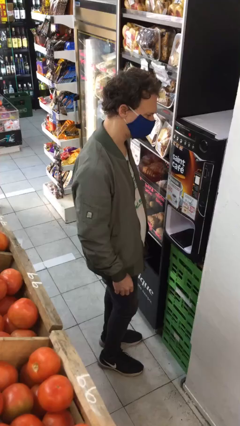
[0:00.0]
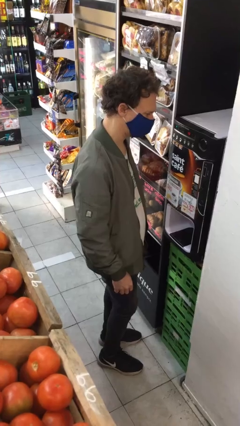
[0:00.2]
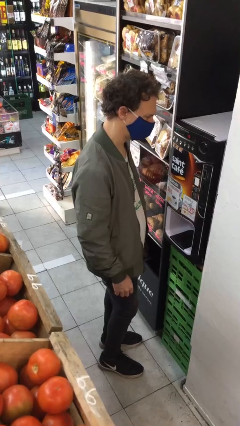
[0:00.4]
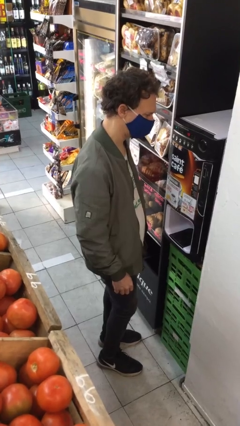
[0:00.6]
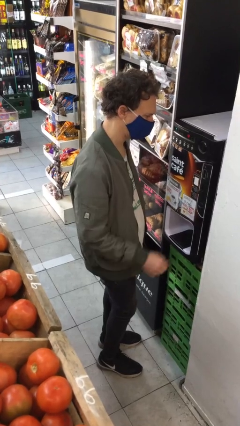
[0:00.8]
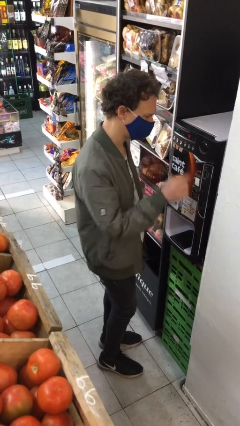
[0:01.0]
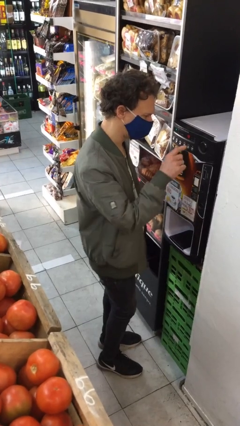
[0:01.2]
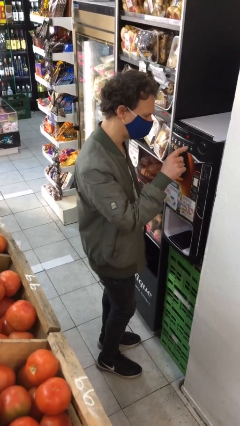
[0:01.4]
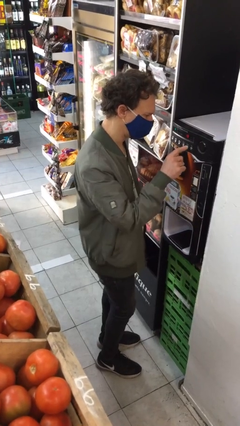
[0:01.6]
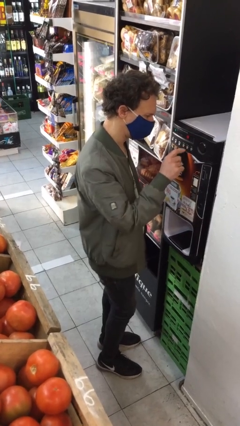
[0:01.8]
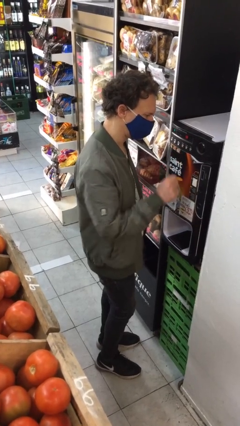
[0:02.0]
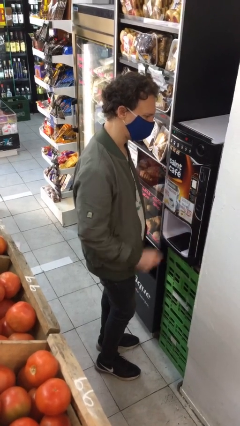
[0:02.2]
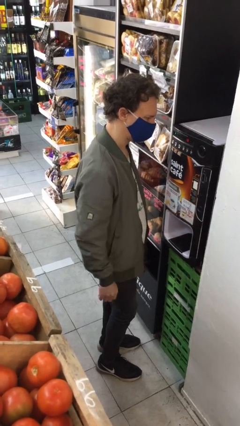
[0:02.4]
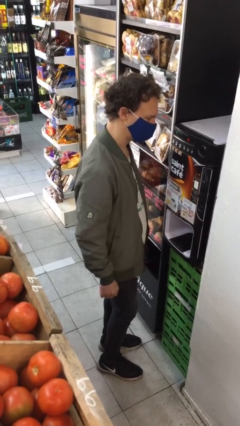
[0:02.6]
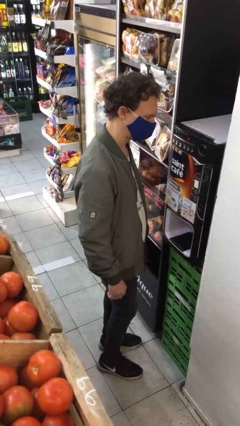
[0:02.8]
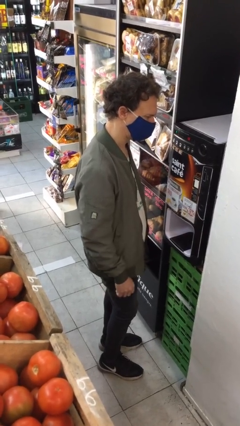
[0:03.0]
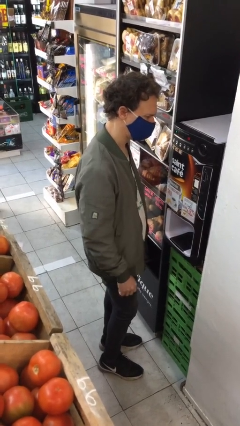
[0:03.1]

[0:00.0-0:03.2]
person purchases from machine

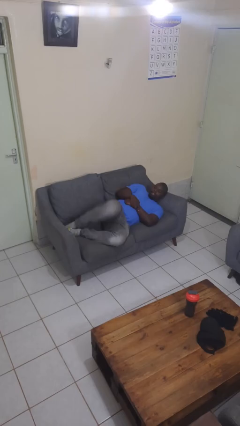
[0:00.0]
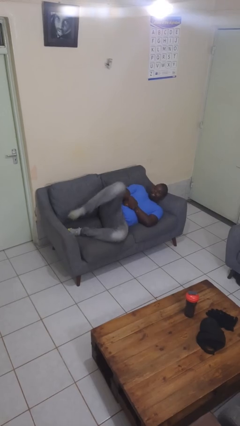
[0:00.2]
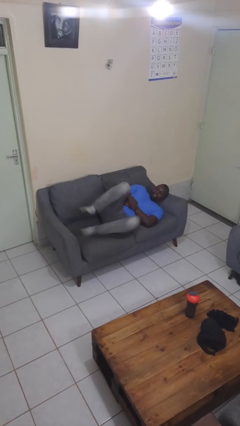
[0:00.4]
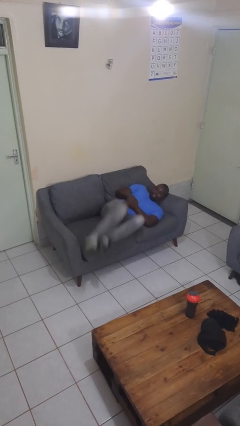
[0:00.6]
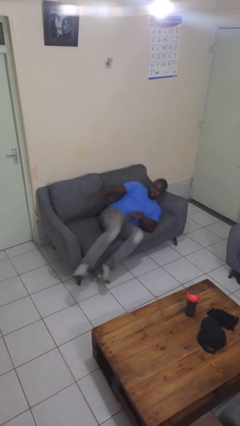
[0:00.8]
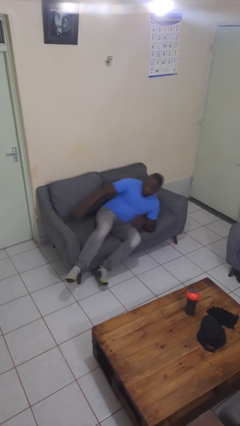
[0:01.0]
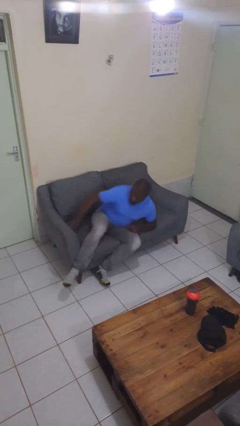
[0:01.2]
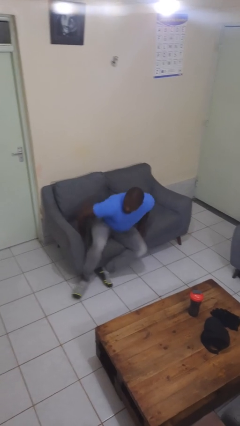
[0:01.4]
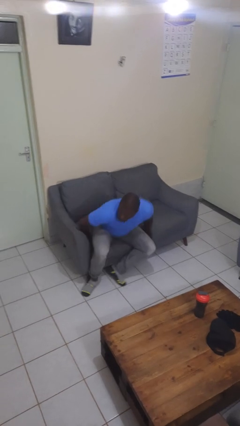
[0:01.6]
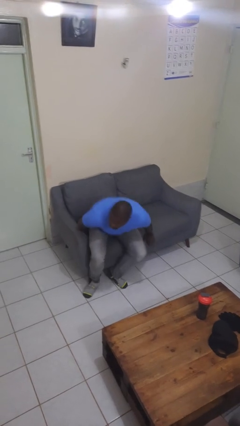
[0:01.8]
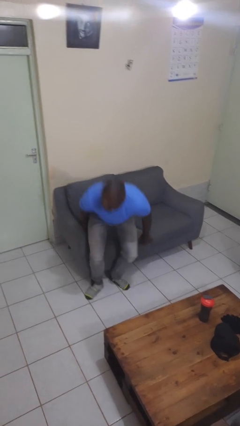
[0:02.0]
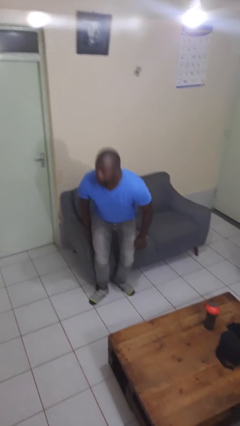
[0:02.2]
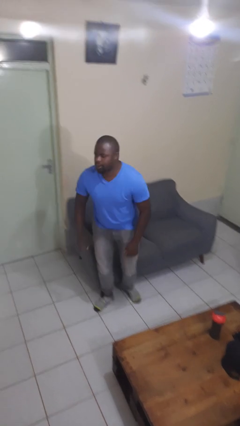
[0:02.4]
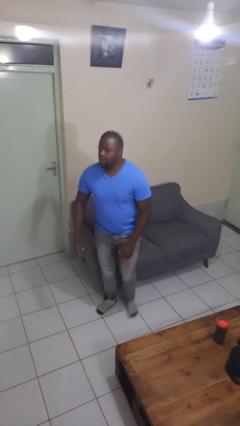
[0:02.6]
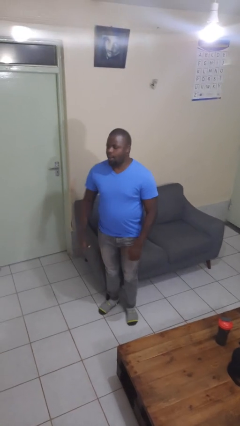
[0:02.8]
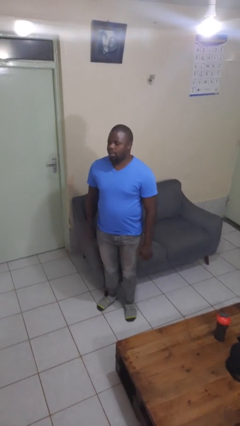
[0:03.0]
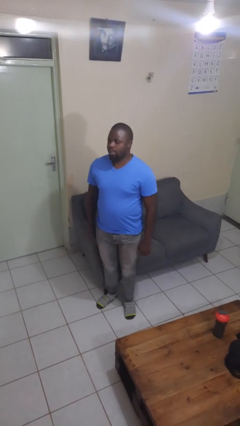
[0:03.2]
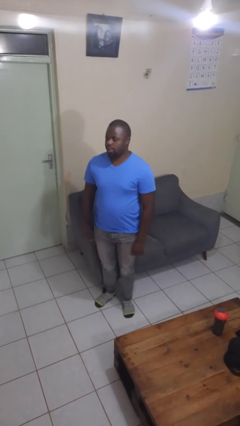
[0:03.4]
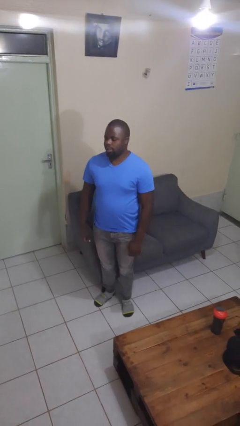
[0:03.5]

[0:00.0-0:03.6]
person stands up

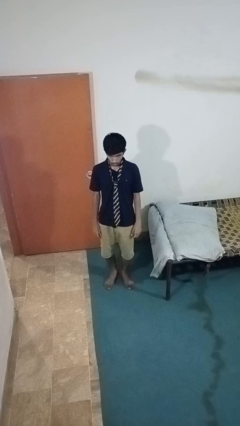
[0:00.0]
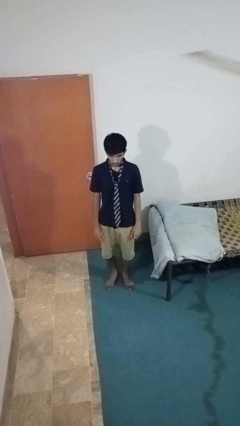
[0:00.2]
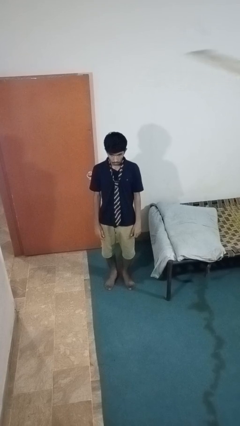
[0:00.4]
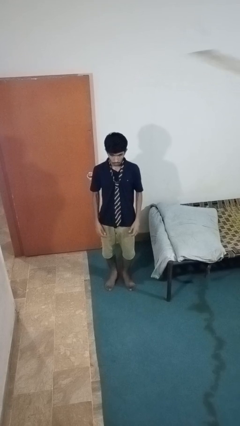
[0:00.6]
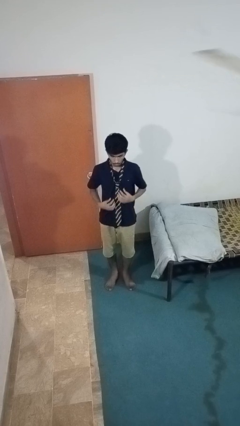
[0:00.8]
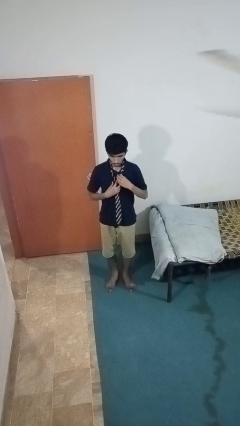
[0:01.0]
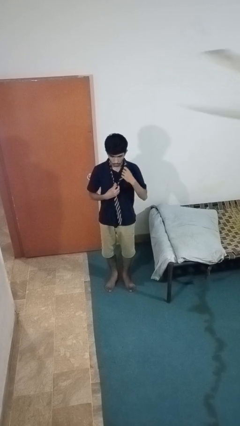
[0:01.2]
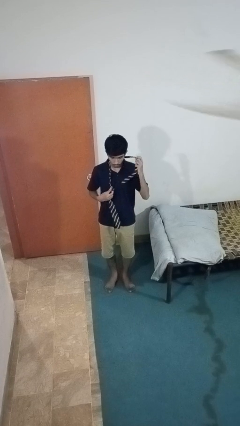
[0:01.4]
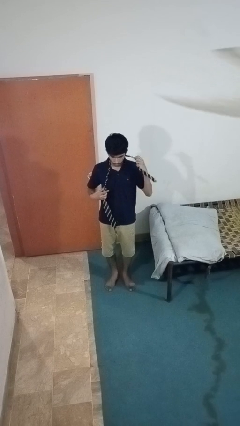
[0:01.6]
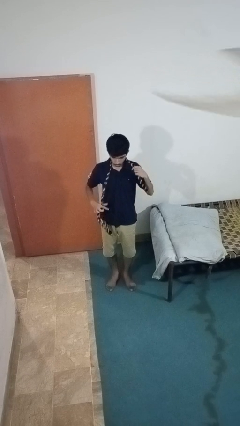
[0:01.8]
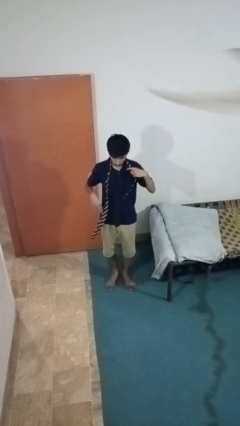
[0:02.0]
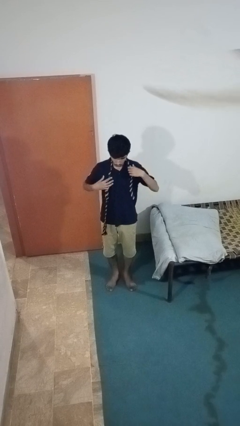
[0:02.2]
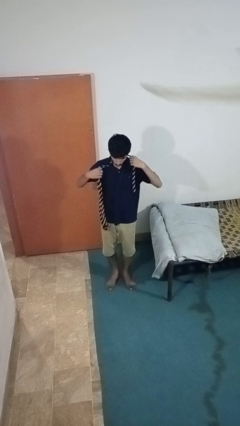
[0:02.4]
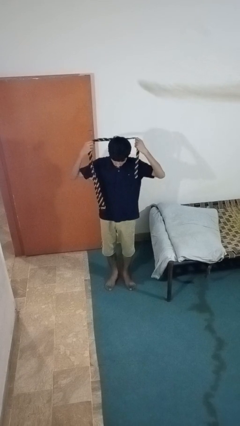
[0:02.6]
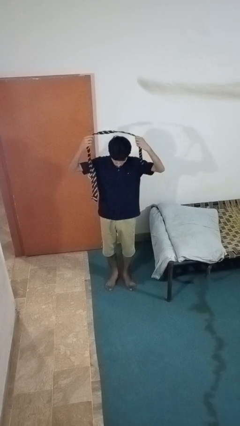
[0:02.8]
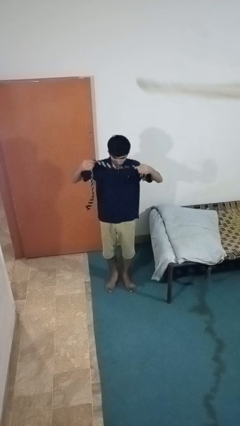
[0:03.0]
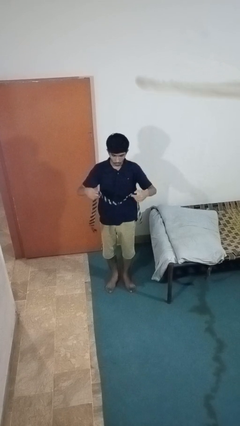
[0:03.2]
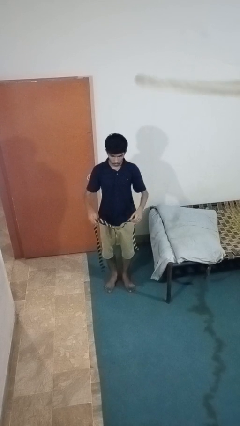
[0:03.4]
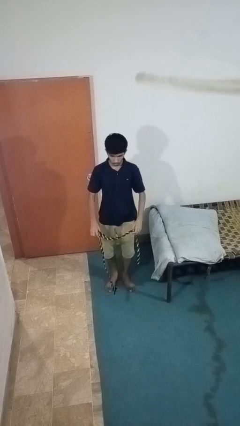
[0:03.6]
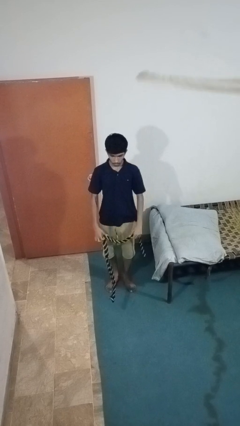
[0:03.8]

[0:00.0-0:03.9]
person takes off necktie

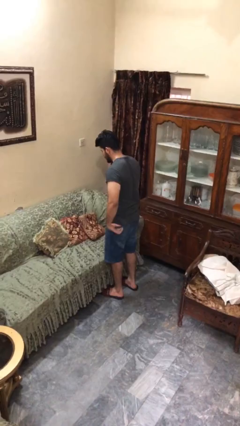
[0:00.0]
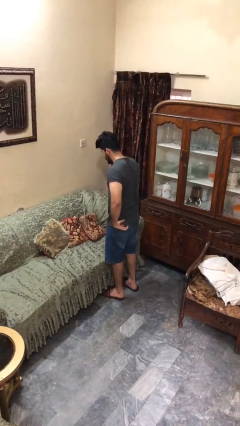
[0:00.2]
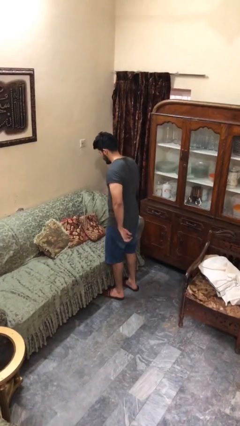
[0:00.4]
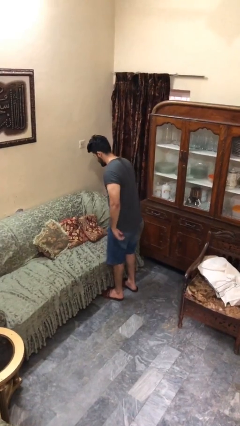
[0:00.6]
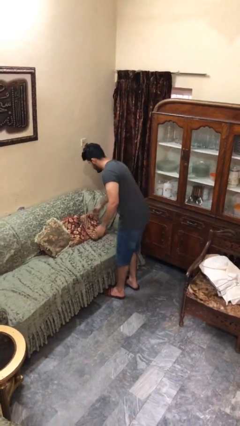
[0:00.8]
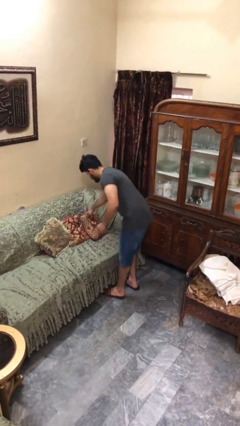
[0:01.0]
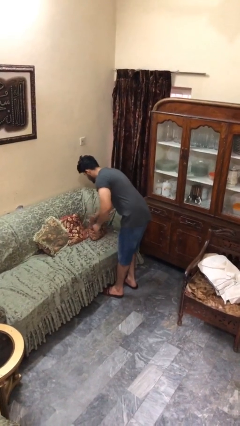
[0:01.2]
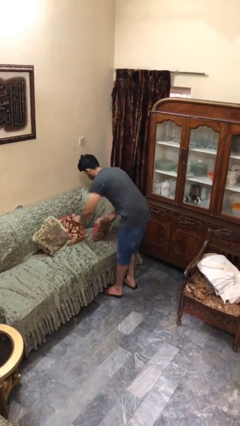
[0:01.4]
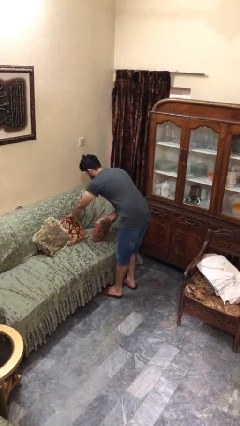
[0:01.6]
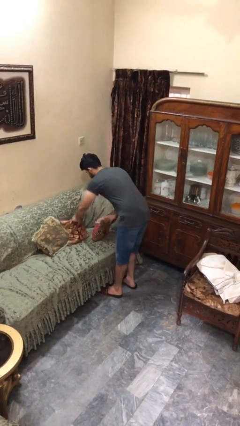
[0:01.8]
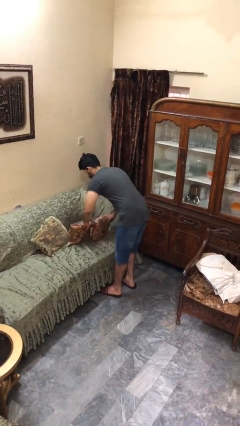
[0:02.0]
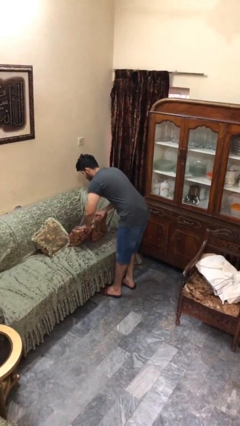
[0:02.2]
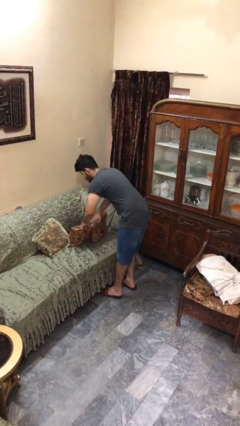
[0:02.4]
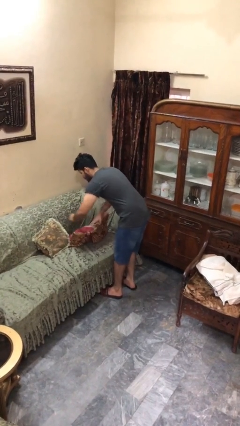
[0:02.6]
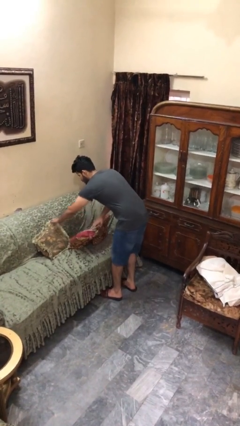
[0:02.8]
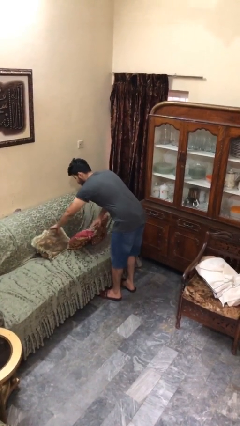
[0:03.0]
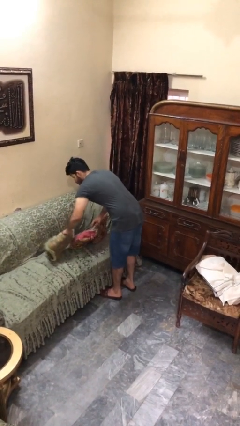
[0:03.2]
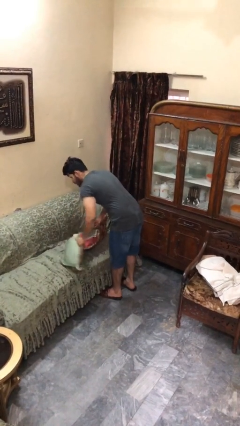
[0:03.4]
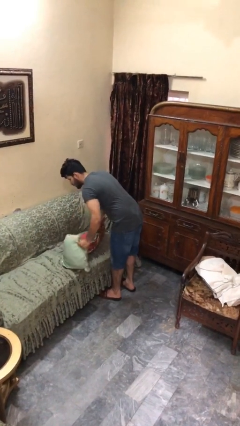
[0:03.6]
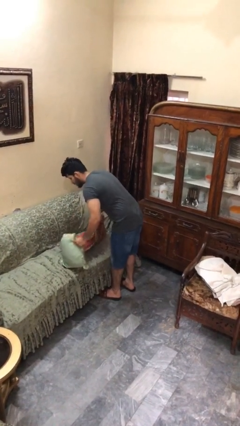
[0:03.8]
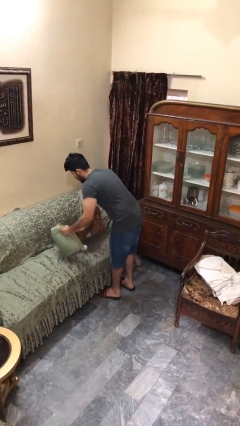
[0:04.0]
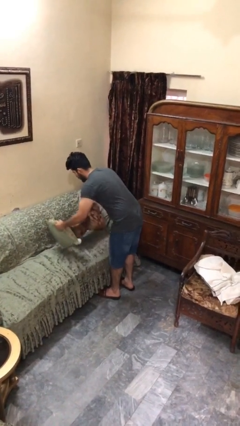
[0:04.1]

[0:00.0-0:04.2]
person searches in couch

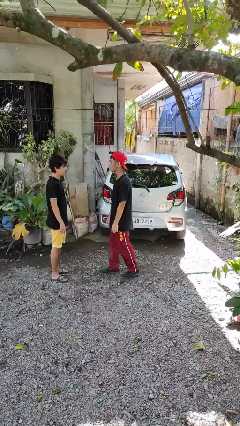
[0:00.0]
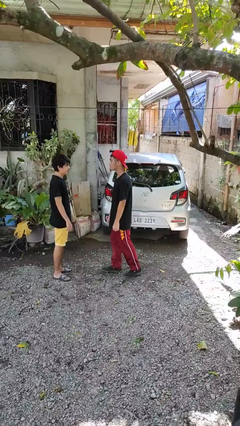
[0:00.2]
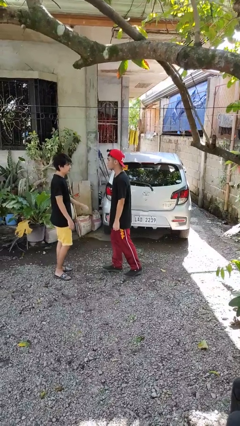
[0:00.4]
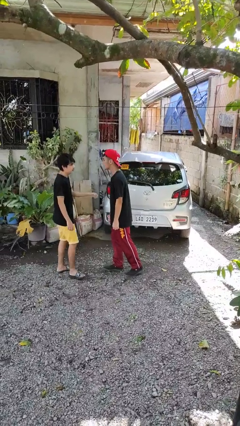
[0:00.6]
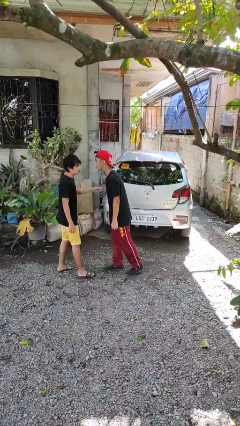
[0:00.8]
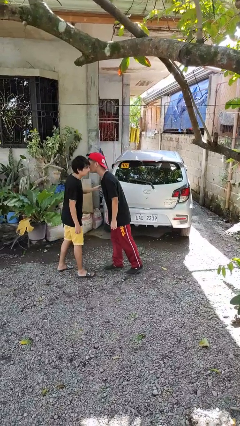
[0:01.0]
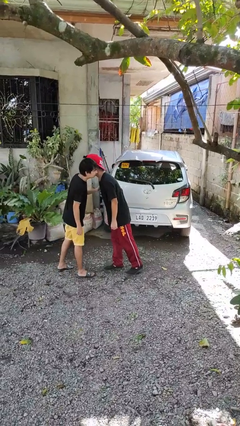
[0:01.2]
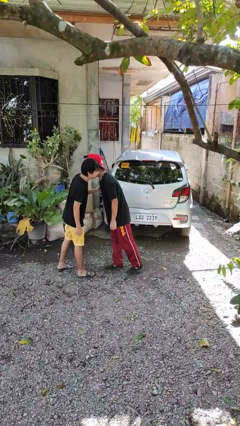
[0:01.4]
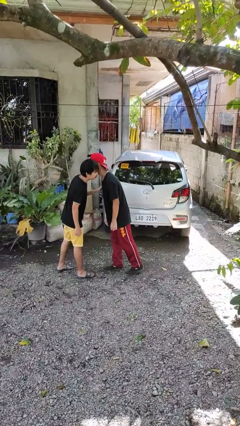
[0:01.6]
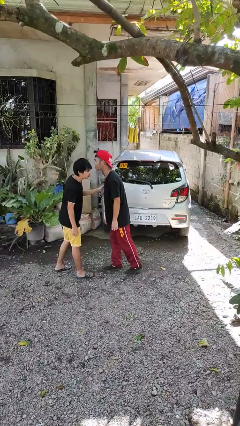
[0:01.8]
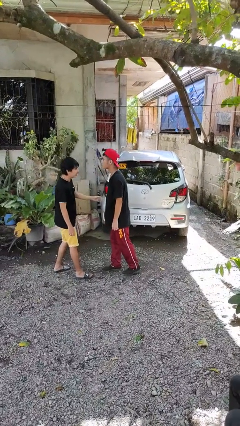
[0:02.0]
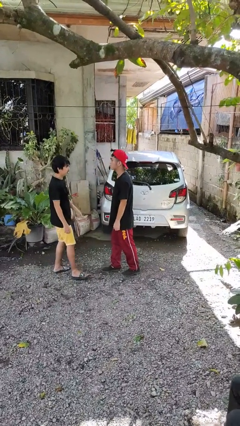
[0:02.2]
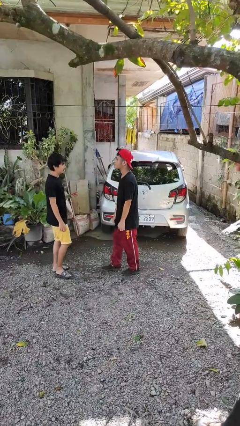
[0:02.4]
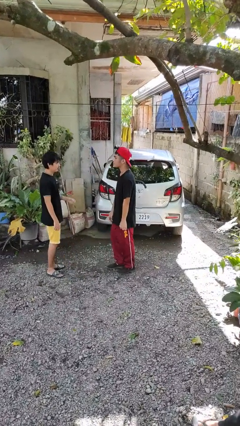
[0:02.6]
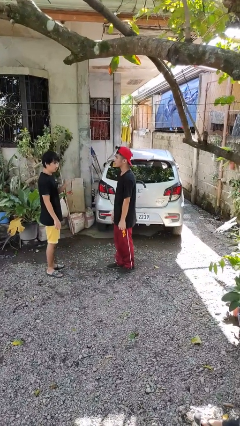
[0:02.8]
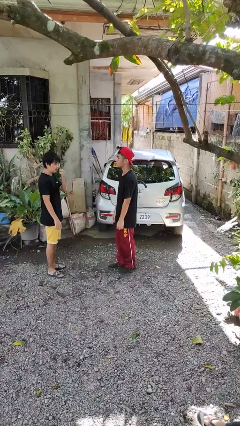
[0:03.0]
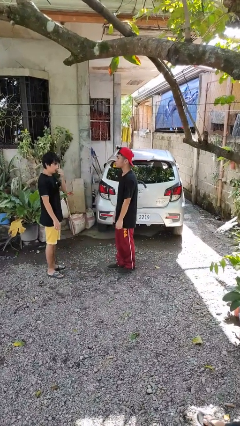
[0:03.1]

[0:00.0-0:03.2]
person kisses cheek of person

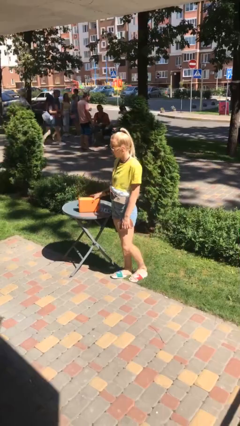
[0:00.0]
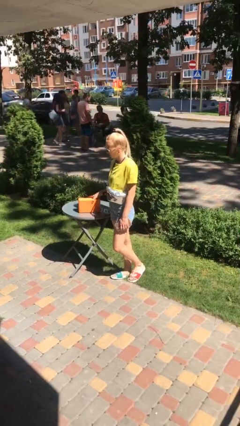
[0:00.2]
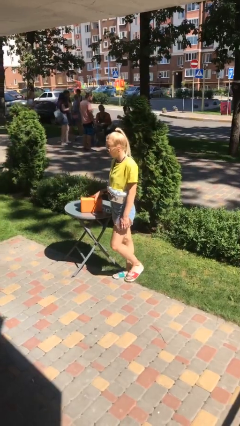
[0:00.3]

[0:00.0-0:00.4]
person puts down object on table
